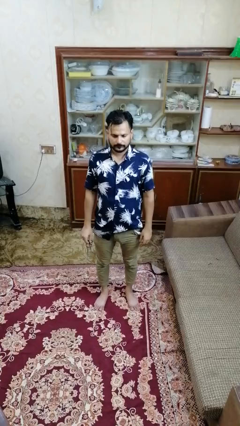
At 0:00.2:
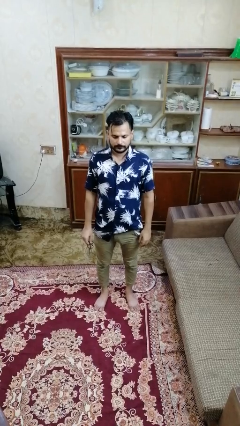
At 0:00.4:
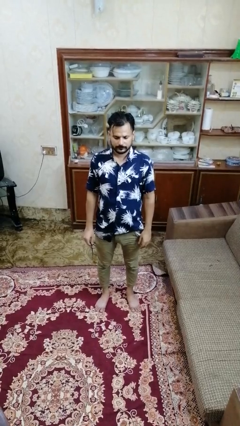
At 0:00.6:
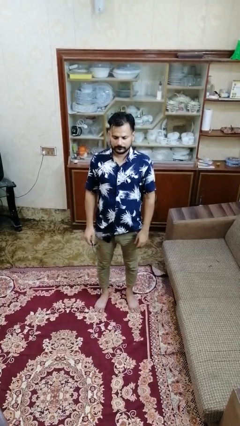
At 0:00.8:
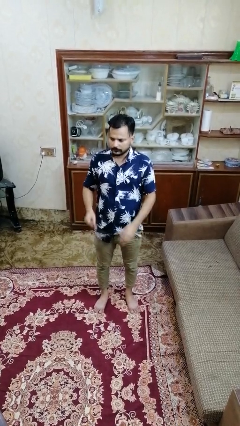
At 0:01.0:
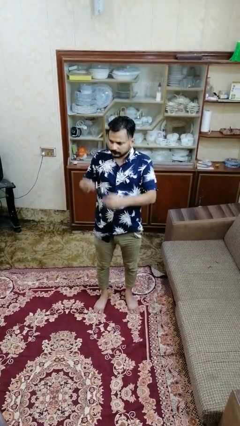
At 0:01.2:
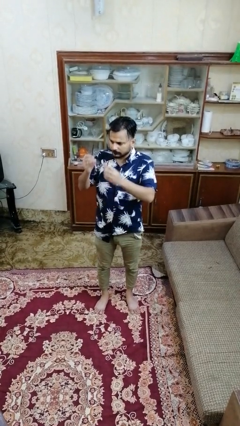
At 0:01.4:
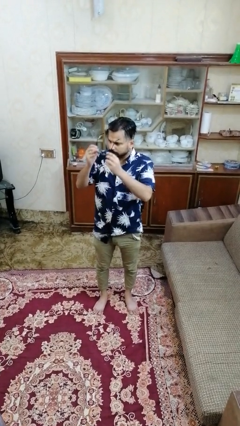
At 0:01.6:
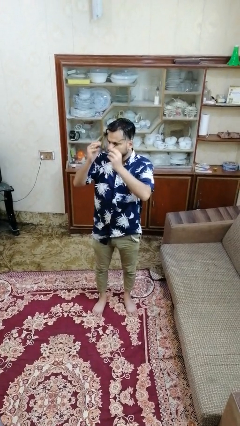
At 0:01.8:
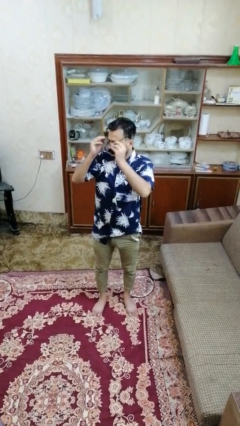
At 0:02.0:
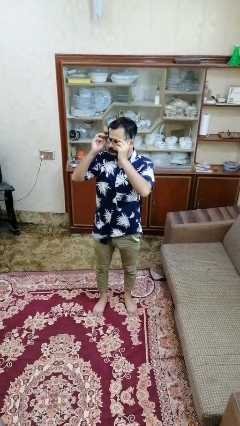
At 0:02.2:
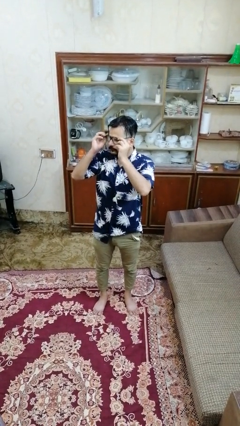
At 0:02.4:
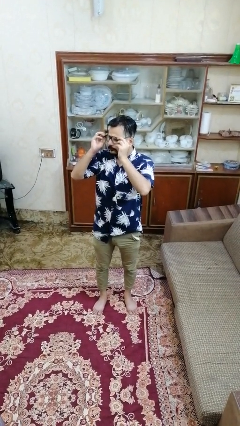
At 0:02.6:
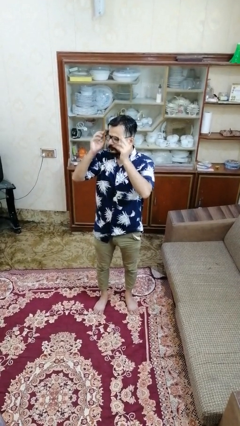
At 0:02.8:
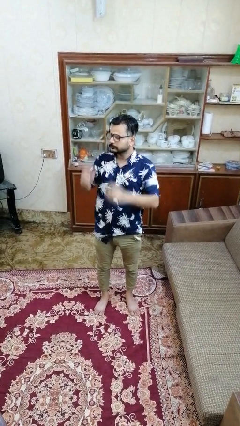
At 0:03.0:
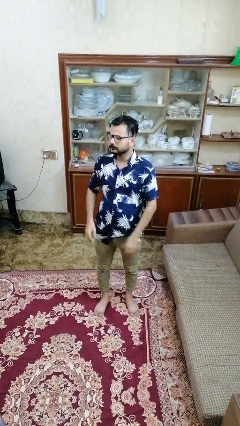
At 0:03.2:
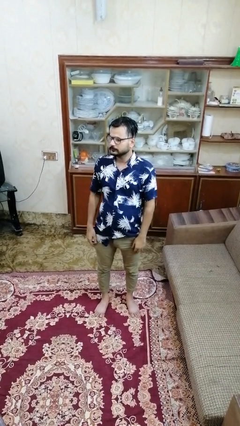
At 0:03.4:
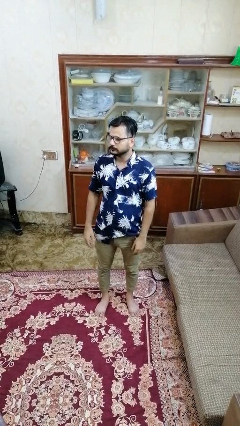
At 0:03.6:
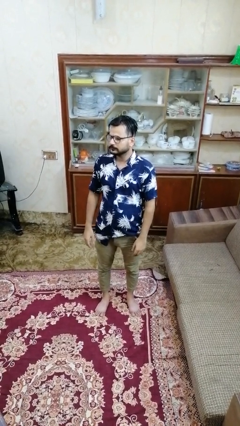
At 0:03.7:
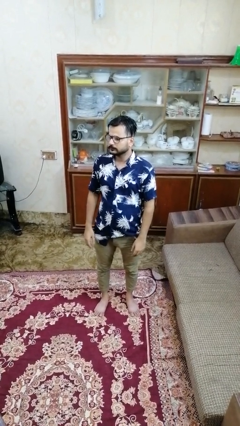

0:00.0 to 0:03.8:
person puts on glasses

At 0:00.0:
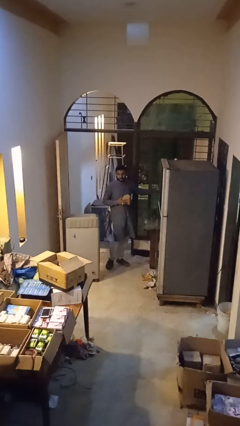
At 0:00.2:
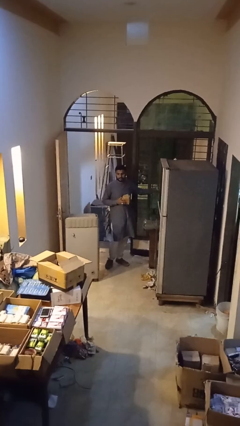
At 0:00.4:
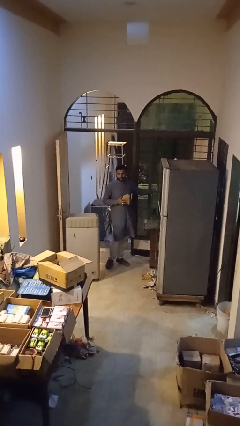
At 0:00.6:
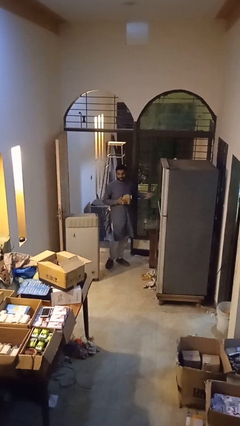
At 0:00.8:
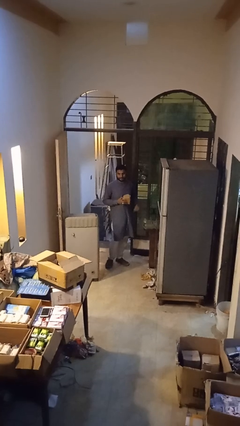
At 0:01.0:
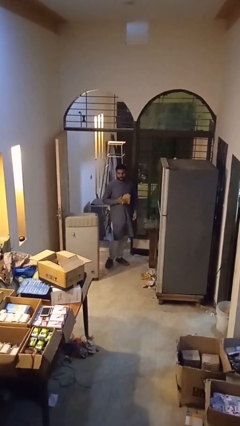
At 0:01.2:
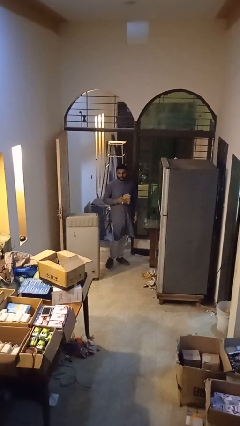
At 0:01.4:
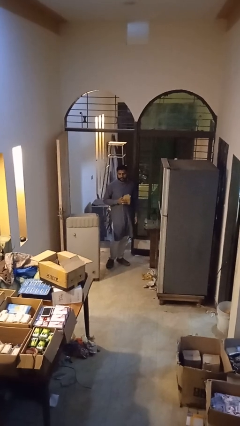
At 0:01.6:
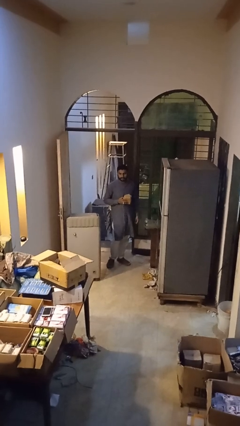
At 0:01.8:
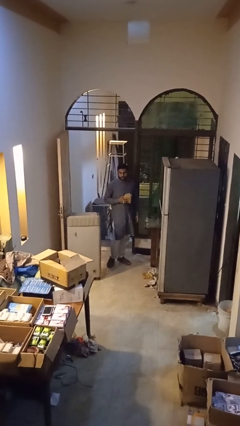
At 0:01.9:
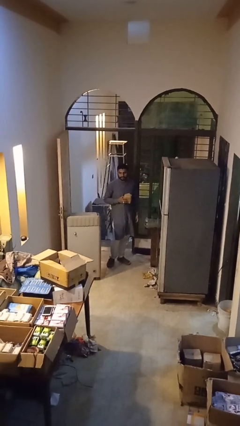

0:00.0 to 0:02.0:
person unplugs from electrical socket

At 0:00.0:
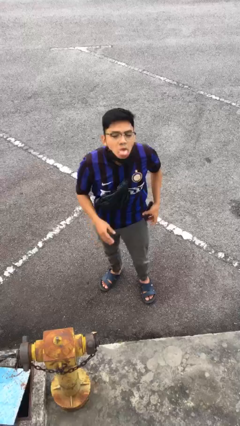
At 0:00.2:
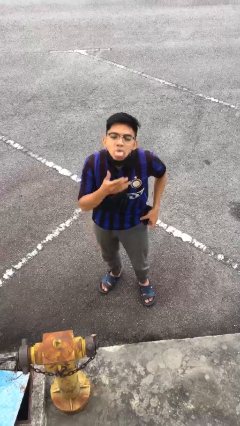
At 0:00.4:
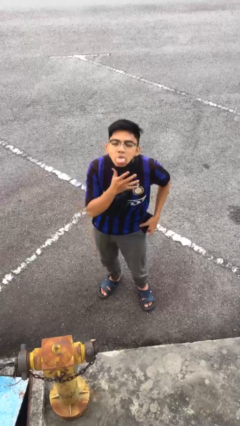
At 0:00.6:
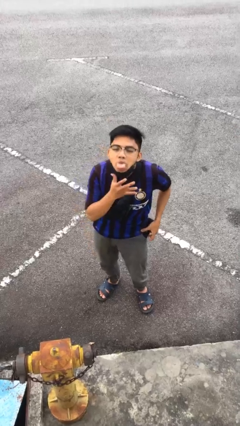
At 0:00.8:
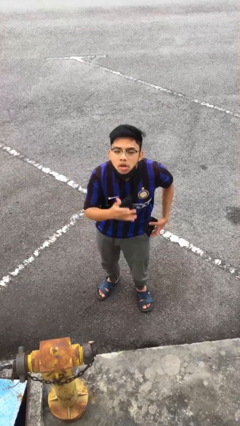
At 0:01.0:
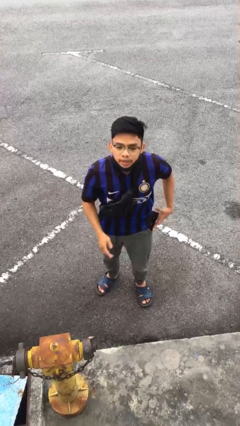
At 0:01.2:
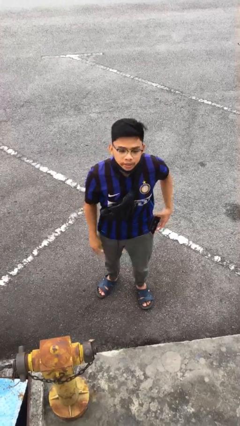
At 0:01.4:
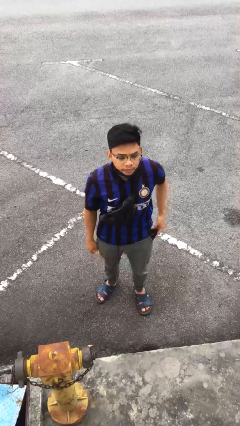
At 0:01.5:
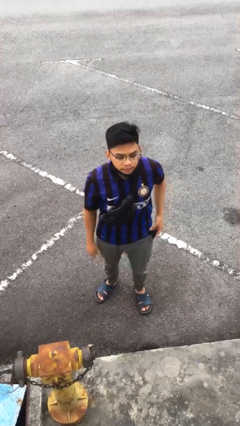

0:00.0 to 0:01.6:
person sticks out tongue

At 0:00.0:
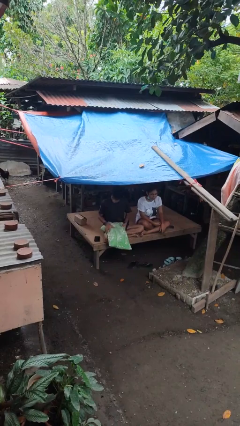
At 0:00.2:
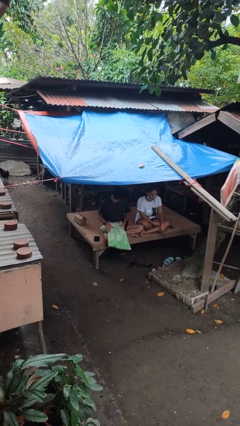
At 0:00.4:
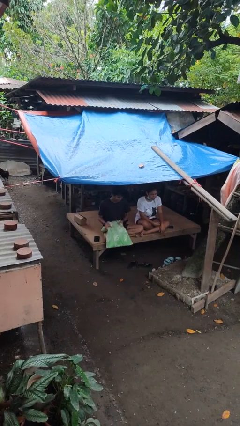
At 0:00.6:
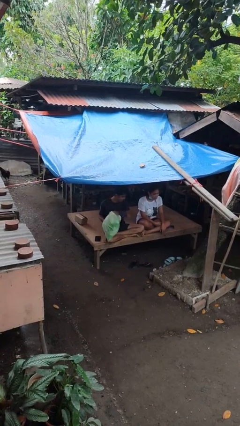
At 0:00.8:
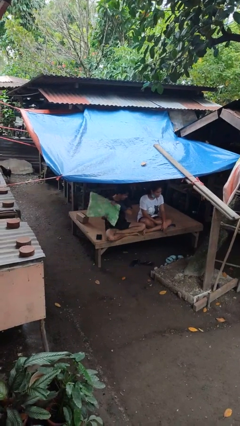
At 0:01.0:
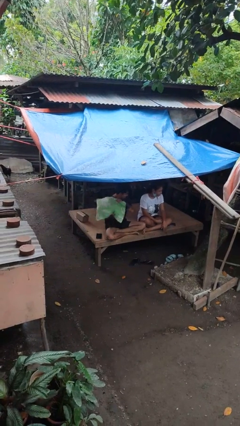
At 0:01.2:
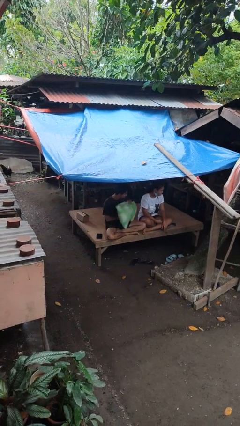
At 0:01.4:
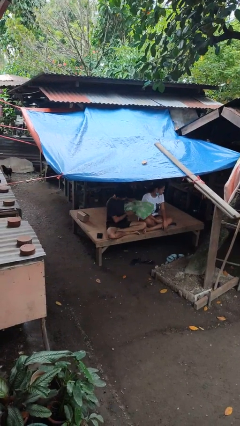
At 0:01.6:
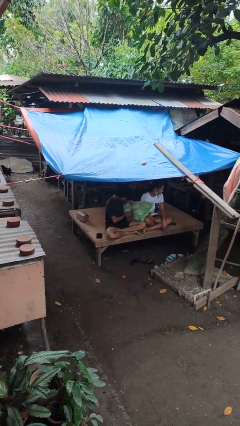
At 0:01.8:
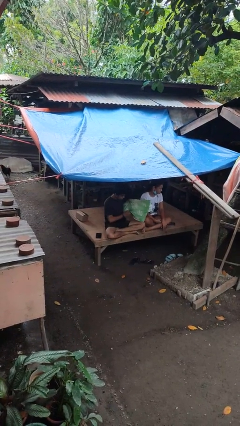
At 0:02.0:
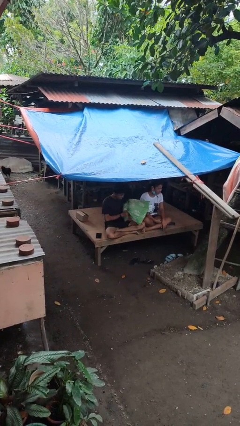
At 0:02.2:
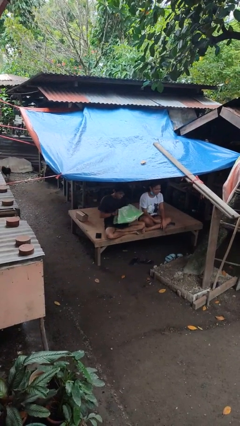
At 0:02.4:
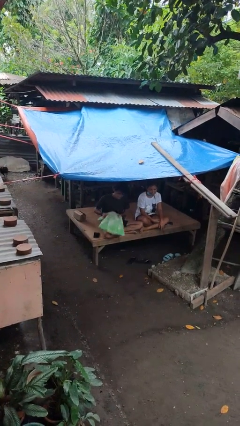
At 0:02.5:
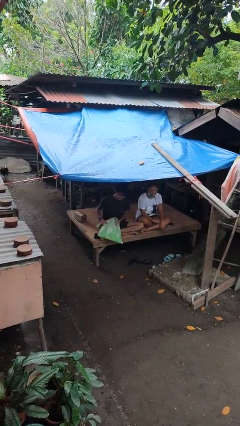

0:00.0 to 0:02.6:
person hits person with pillow

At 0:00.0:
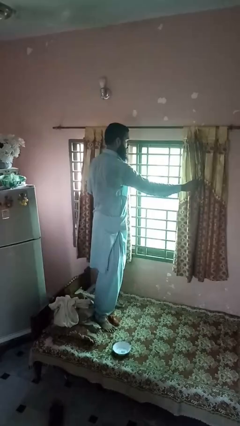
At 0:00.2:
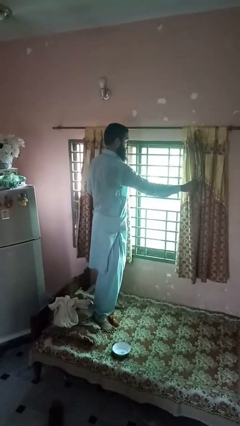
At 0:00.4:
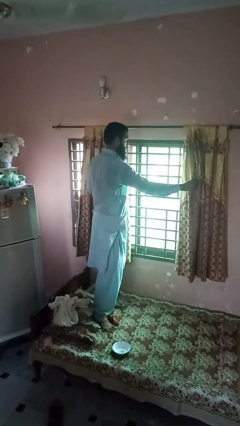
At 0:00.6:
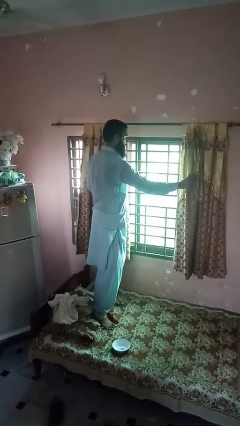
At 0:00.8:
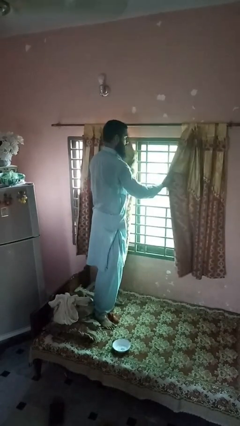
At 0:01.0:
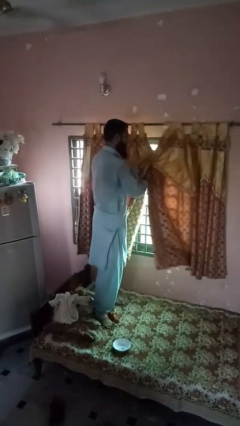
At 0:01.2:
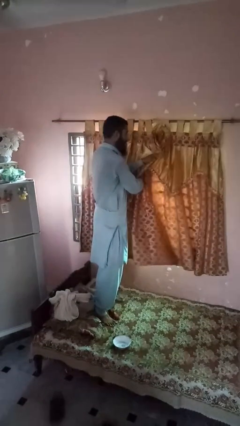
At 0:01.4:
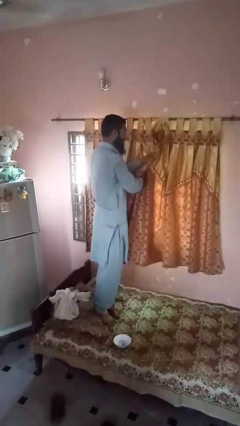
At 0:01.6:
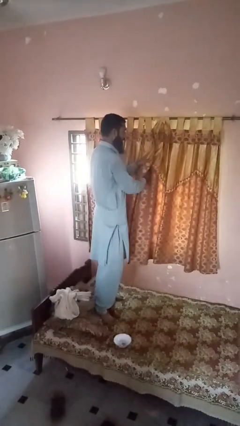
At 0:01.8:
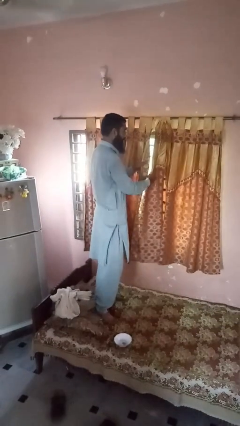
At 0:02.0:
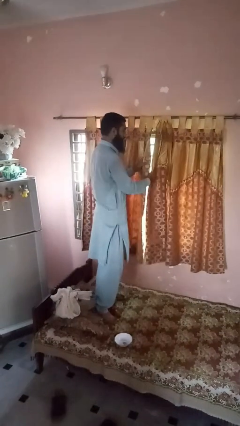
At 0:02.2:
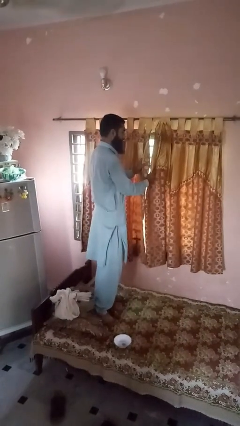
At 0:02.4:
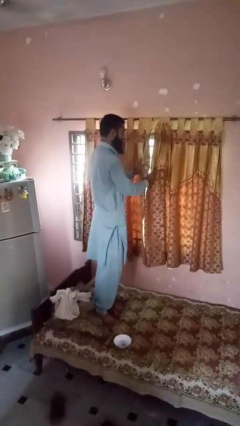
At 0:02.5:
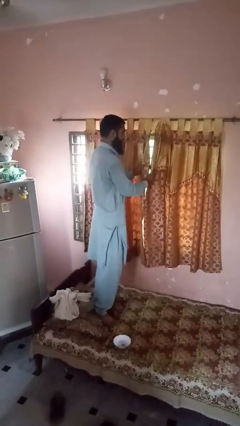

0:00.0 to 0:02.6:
person closes curtains

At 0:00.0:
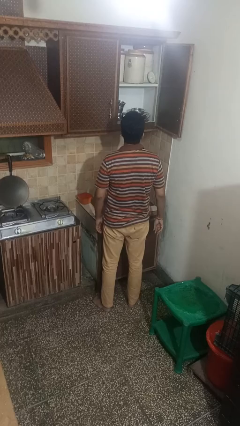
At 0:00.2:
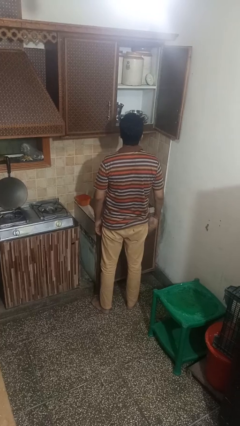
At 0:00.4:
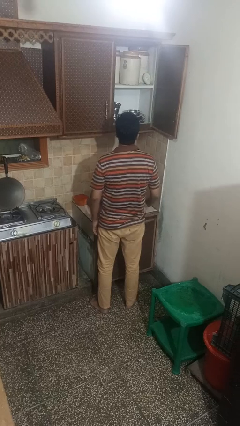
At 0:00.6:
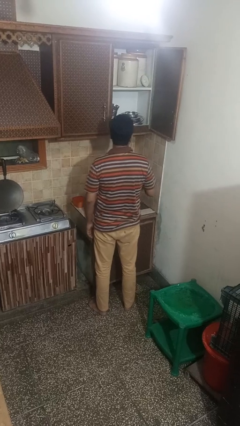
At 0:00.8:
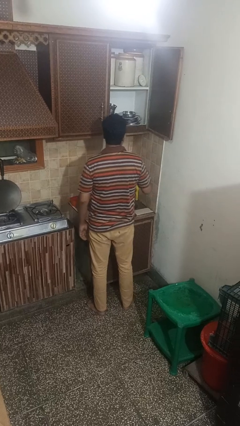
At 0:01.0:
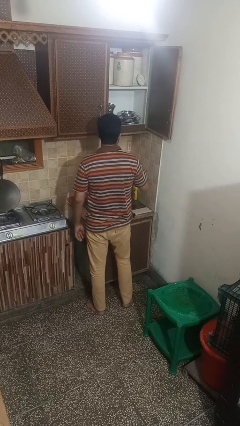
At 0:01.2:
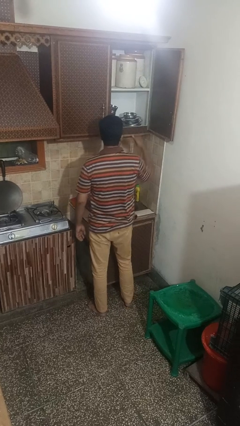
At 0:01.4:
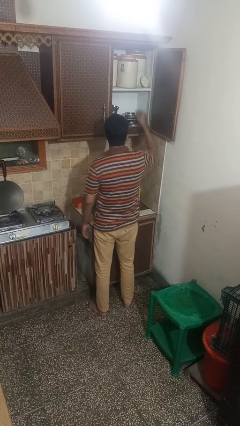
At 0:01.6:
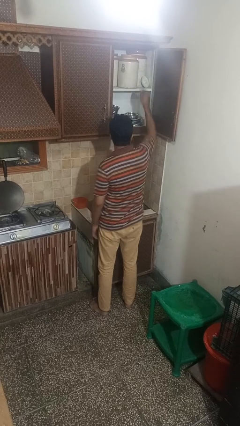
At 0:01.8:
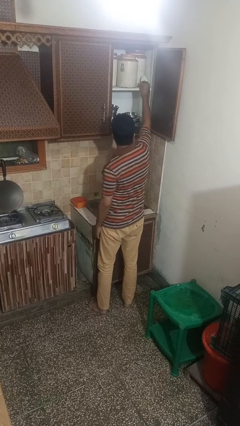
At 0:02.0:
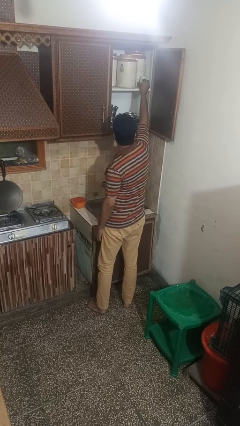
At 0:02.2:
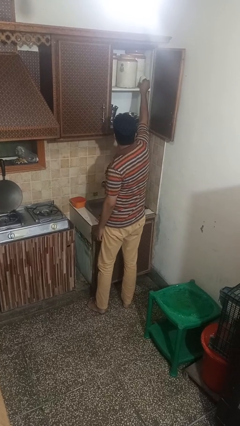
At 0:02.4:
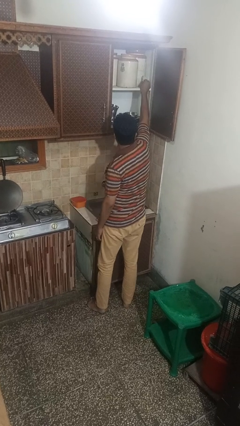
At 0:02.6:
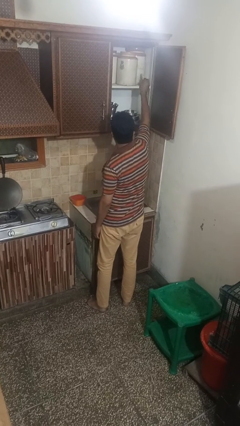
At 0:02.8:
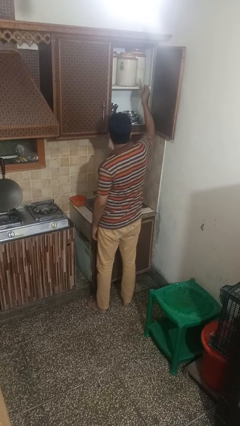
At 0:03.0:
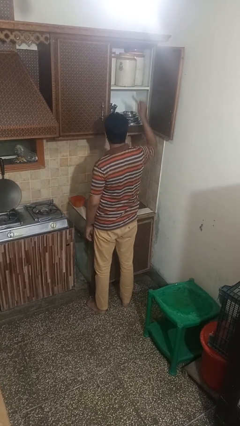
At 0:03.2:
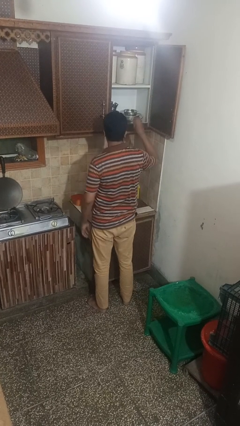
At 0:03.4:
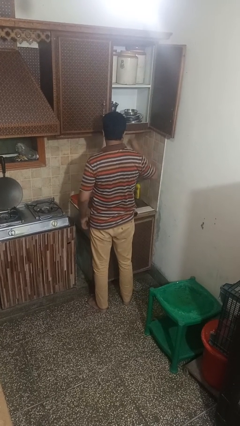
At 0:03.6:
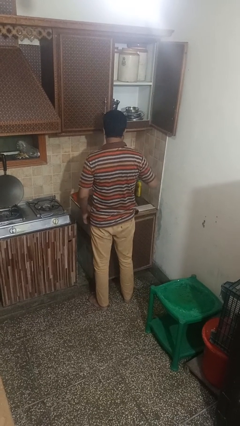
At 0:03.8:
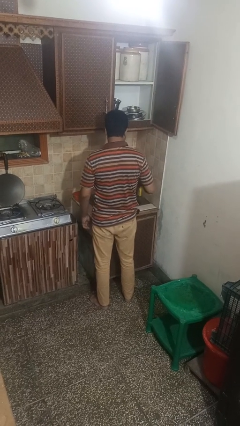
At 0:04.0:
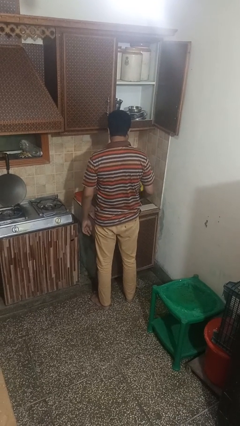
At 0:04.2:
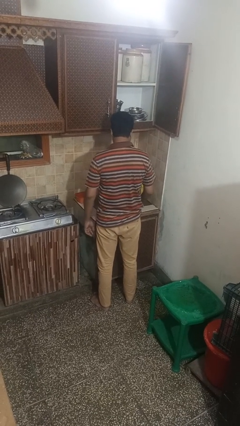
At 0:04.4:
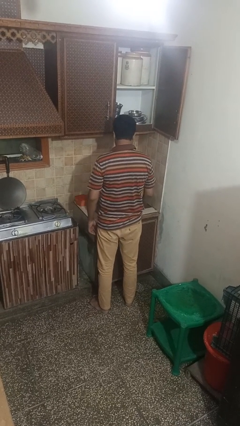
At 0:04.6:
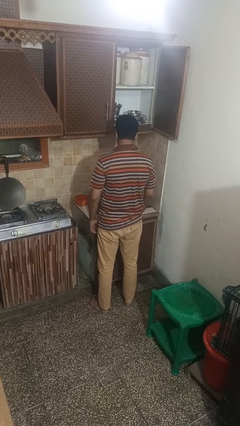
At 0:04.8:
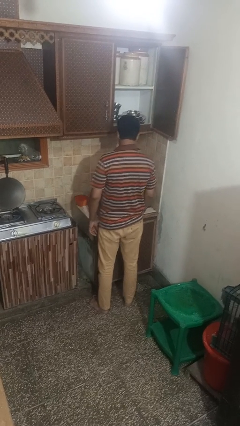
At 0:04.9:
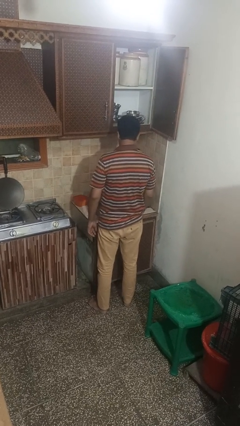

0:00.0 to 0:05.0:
person takes object from cabinet
